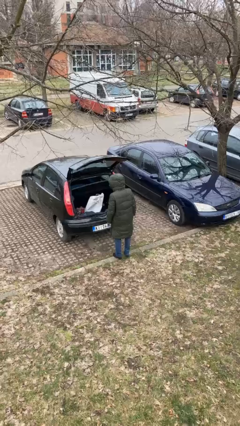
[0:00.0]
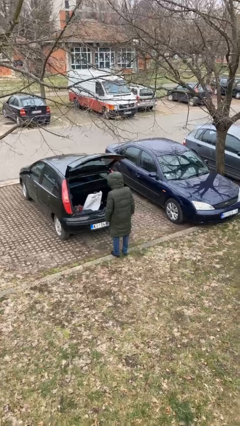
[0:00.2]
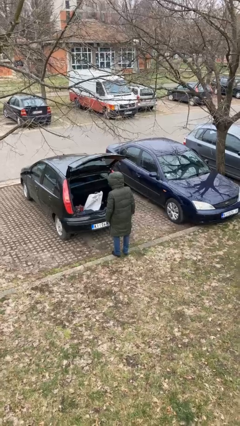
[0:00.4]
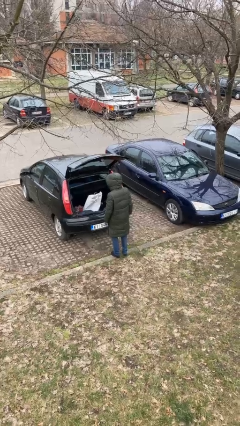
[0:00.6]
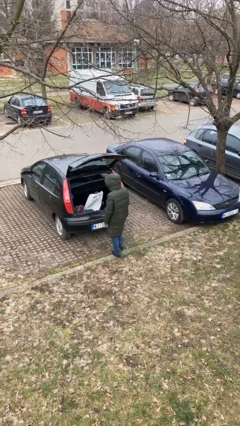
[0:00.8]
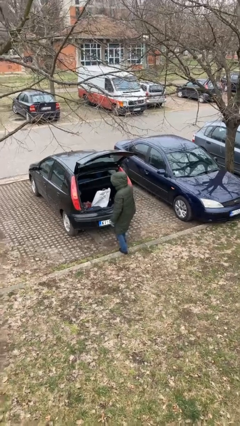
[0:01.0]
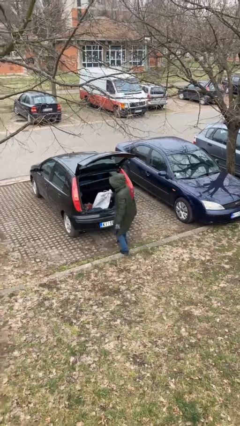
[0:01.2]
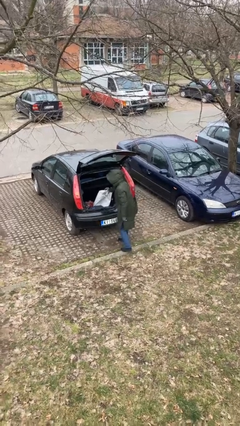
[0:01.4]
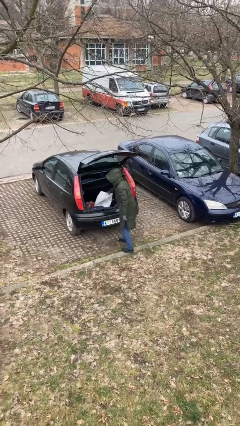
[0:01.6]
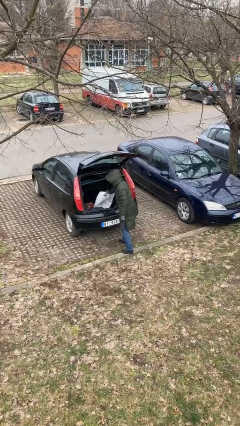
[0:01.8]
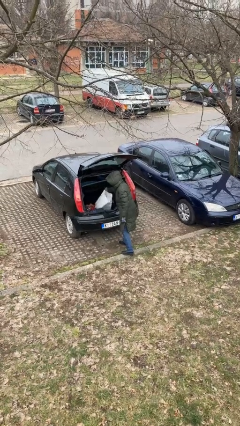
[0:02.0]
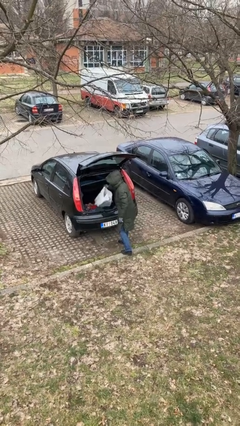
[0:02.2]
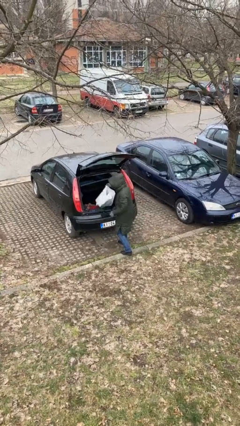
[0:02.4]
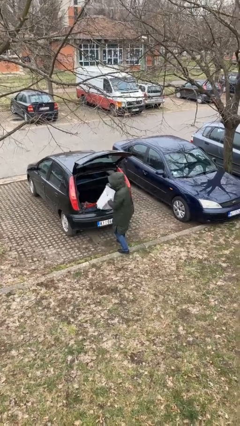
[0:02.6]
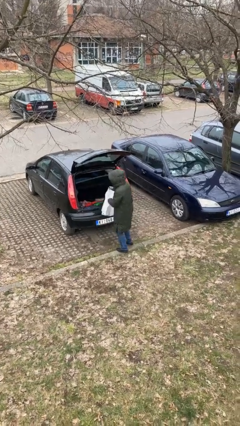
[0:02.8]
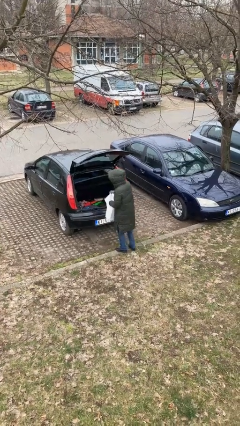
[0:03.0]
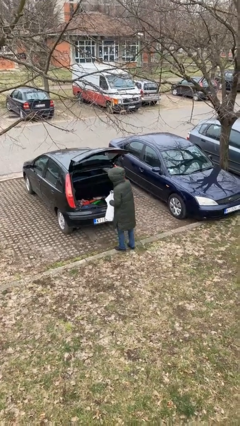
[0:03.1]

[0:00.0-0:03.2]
person unloads car

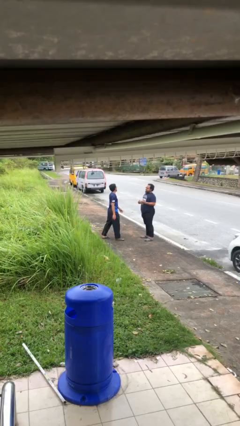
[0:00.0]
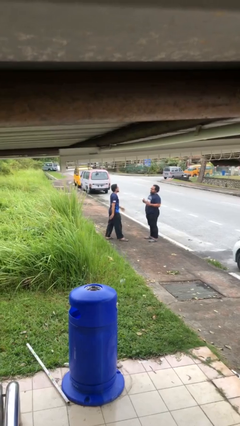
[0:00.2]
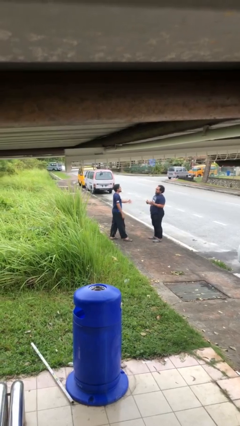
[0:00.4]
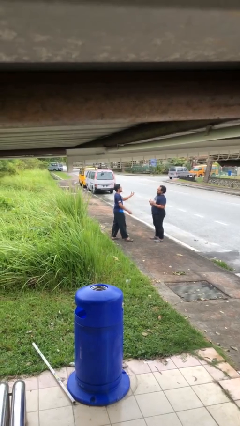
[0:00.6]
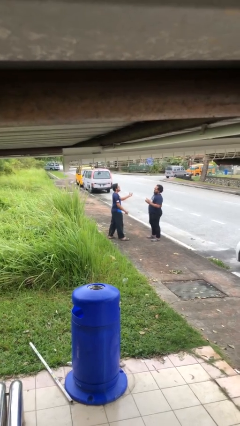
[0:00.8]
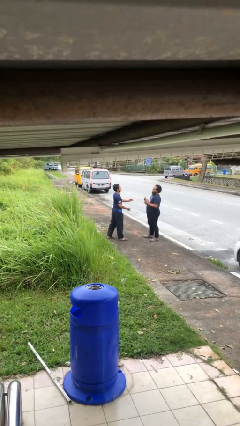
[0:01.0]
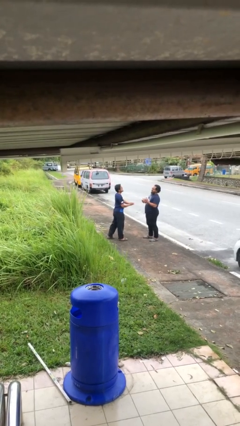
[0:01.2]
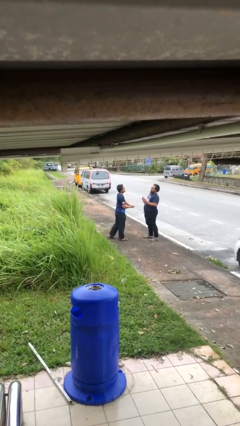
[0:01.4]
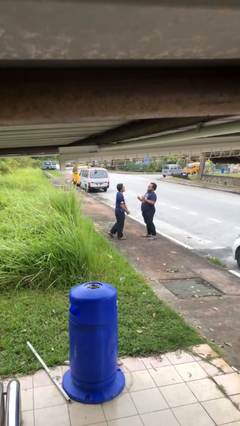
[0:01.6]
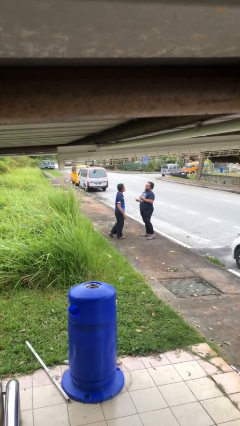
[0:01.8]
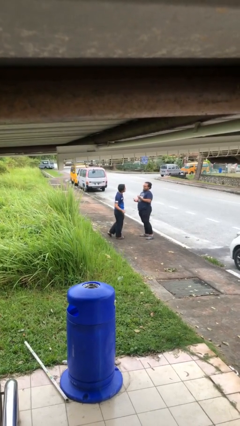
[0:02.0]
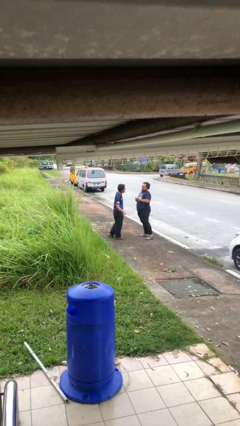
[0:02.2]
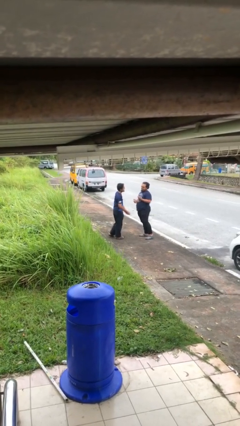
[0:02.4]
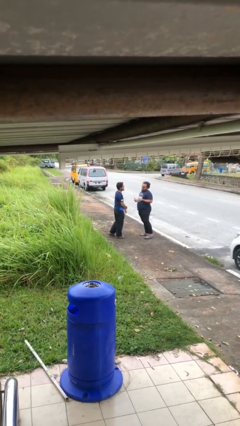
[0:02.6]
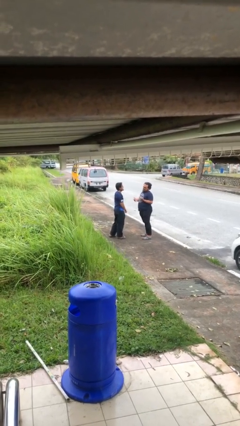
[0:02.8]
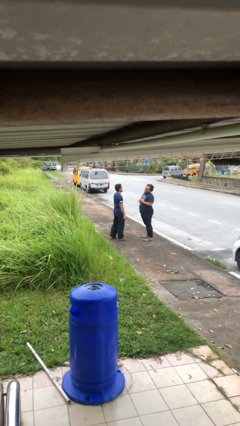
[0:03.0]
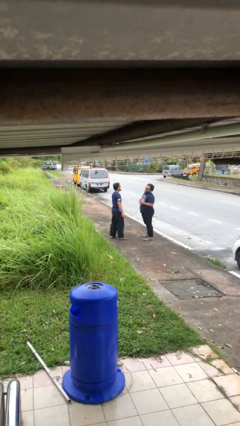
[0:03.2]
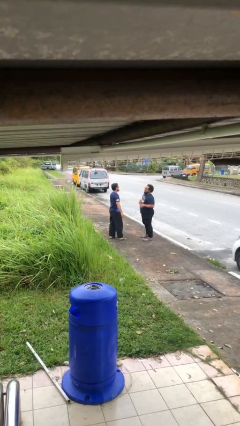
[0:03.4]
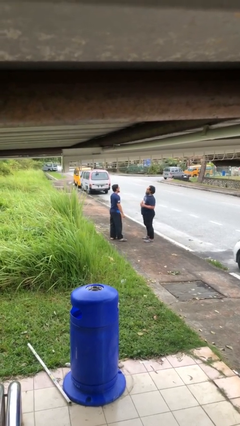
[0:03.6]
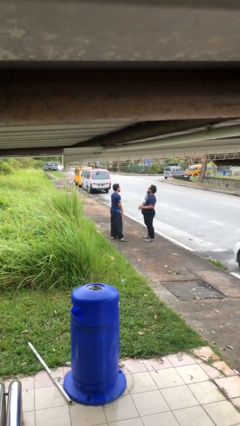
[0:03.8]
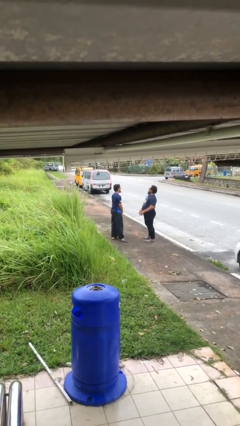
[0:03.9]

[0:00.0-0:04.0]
person talks to person

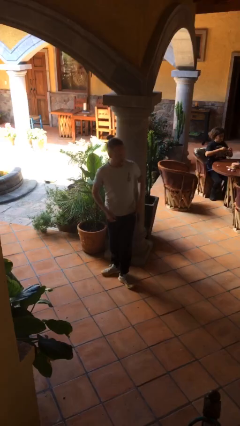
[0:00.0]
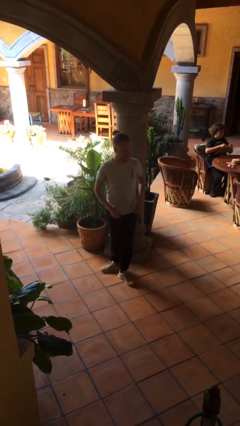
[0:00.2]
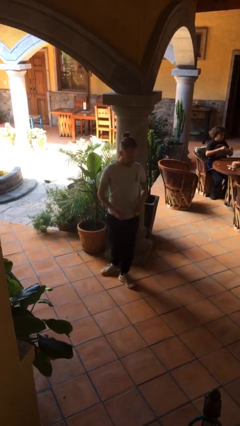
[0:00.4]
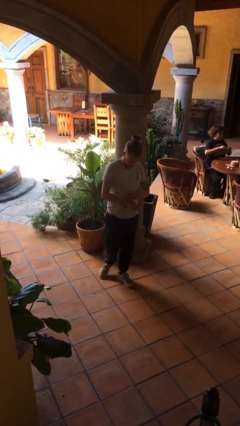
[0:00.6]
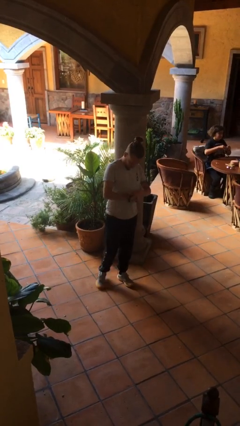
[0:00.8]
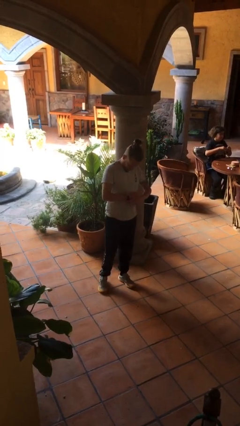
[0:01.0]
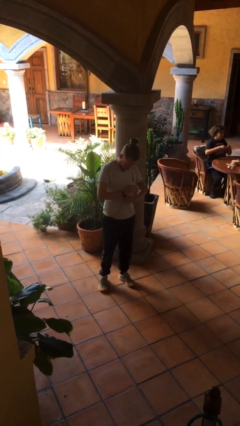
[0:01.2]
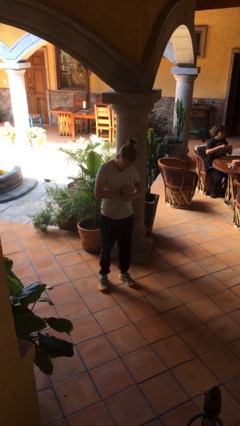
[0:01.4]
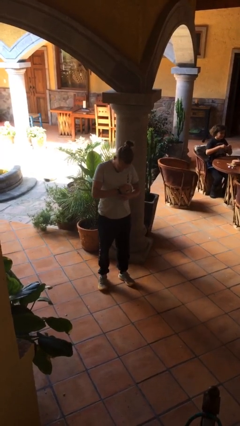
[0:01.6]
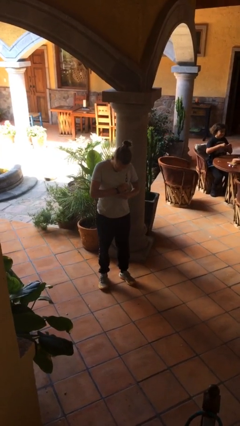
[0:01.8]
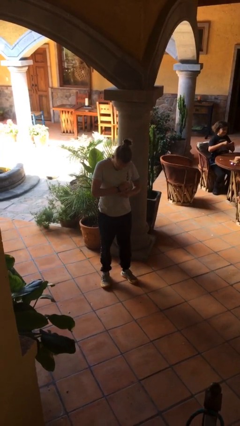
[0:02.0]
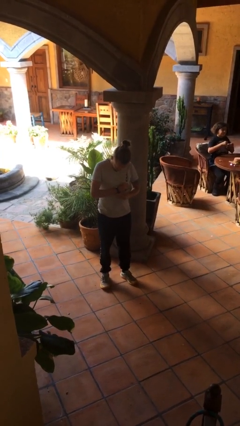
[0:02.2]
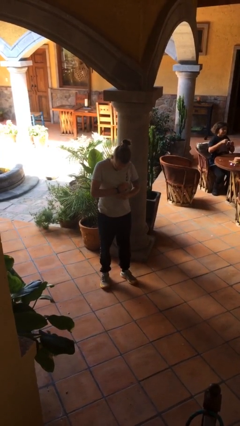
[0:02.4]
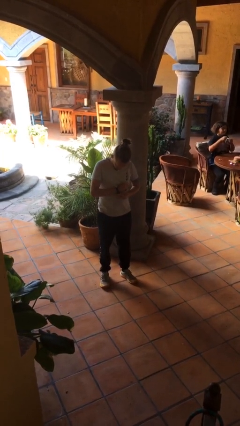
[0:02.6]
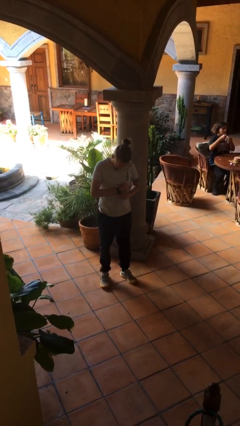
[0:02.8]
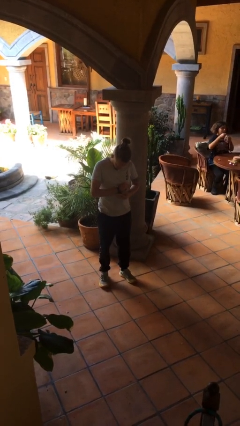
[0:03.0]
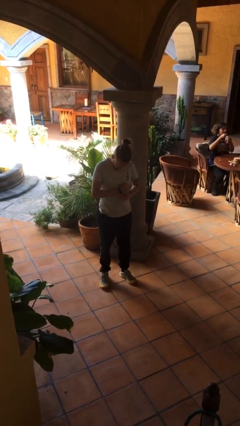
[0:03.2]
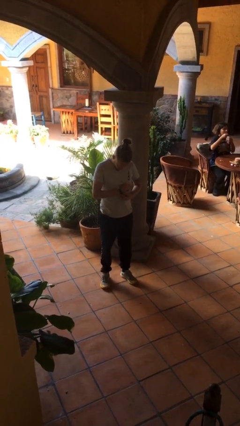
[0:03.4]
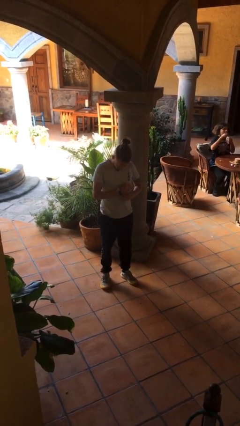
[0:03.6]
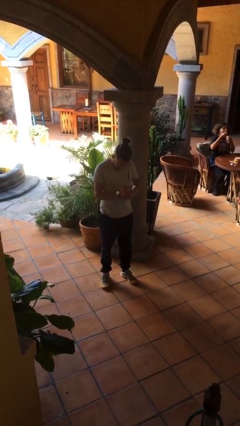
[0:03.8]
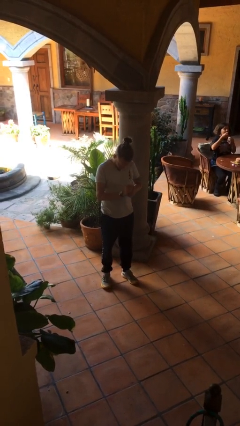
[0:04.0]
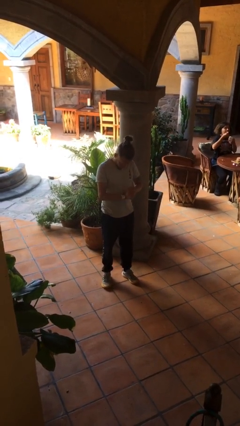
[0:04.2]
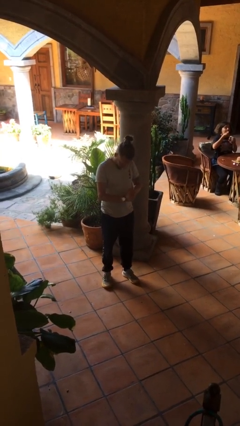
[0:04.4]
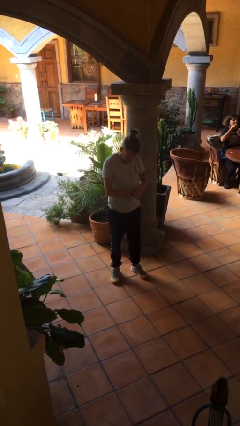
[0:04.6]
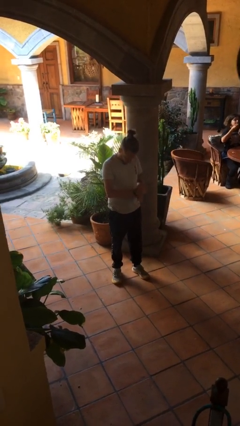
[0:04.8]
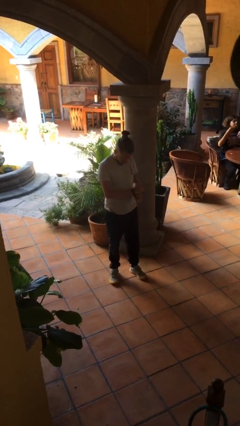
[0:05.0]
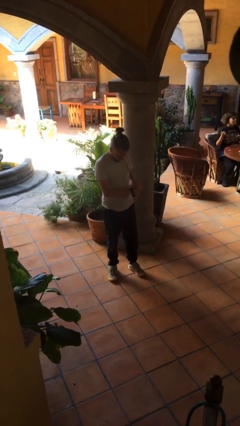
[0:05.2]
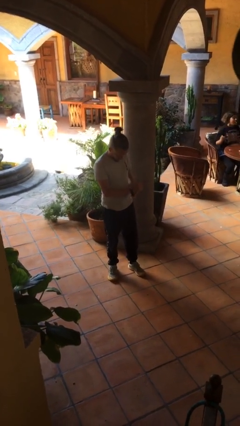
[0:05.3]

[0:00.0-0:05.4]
person puts on wristwatch

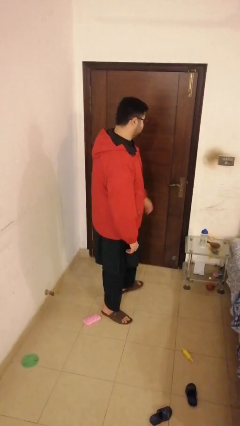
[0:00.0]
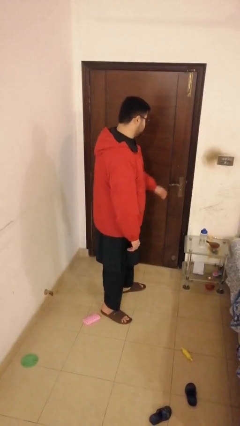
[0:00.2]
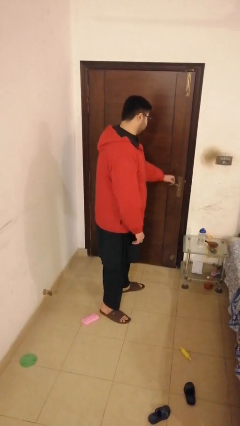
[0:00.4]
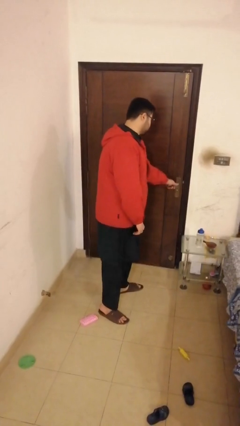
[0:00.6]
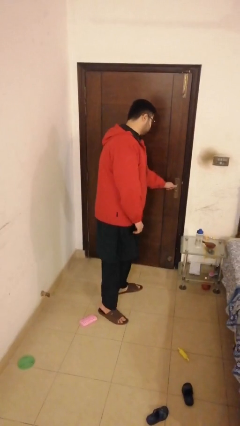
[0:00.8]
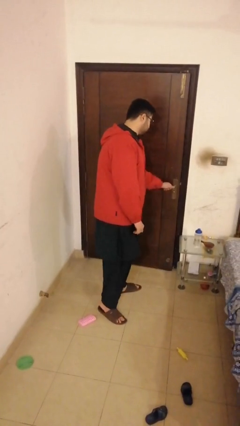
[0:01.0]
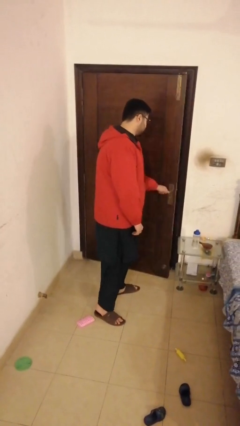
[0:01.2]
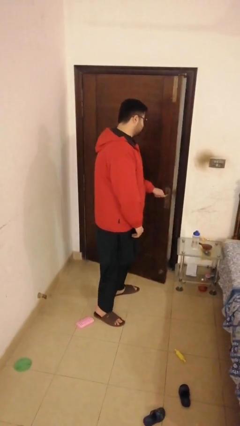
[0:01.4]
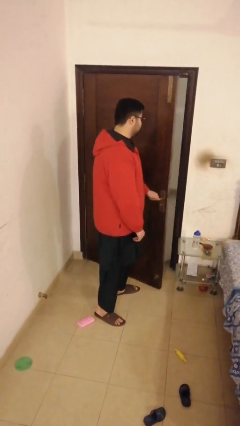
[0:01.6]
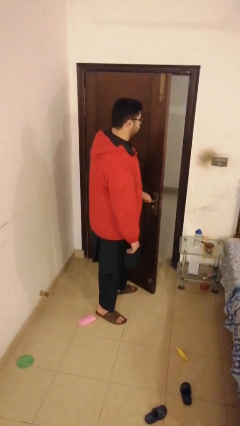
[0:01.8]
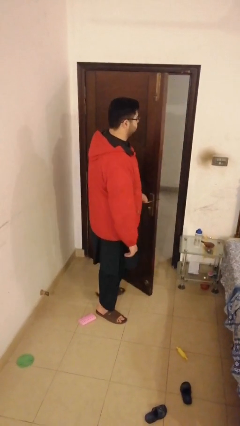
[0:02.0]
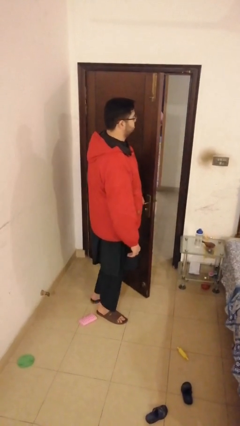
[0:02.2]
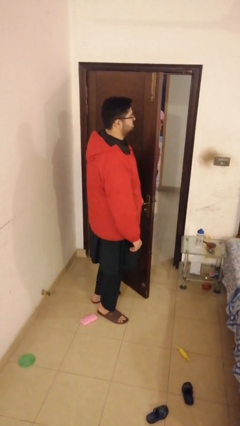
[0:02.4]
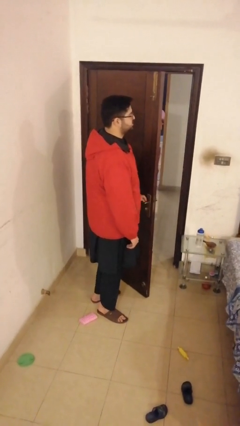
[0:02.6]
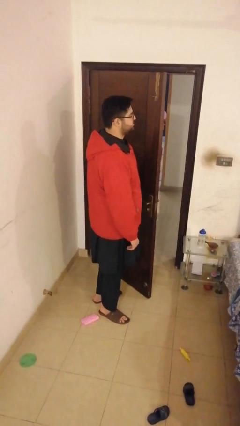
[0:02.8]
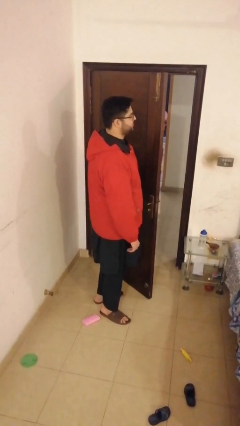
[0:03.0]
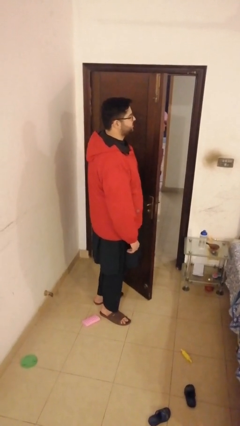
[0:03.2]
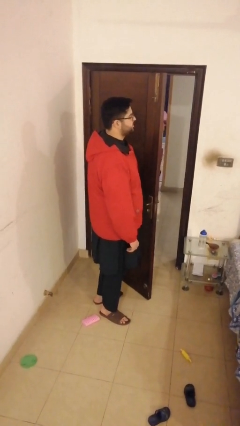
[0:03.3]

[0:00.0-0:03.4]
person opens facility door

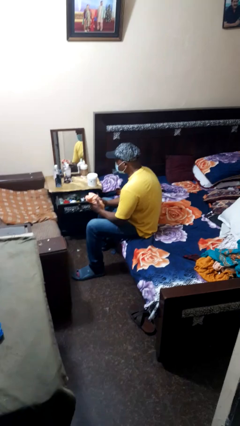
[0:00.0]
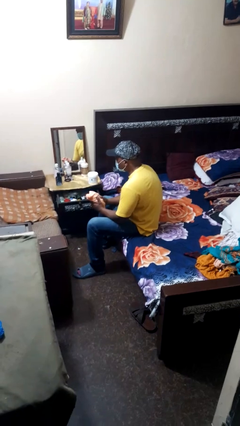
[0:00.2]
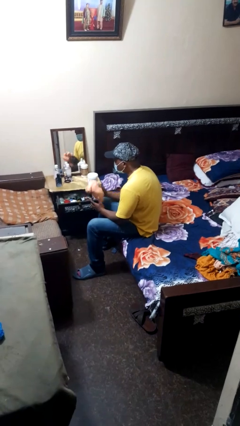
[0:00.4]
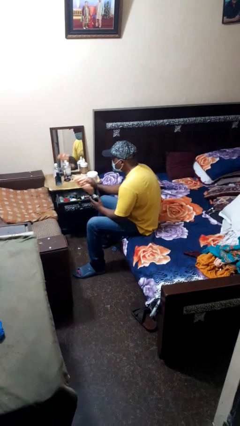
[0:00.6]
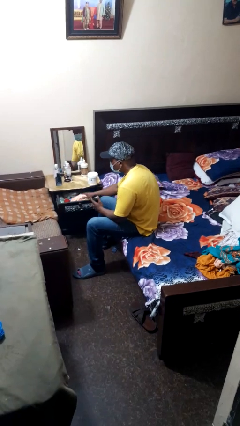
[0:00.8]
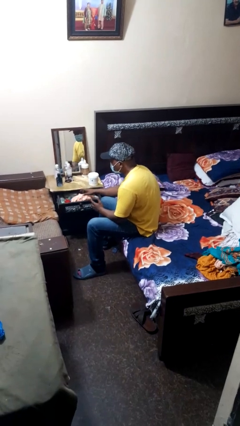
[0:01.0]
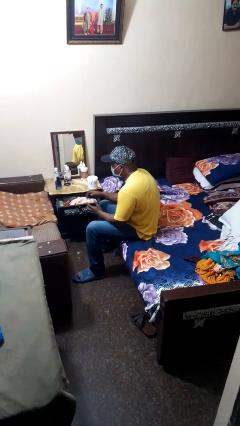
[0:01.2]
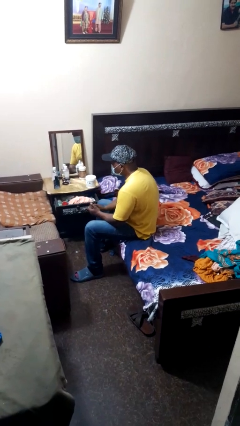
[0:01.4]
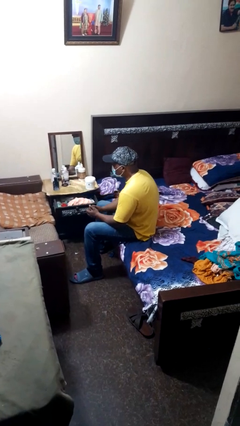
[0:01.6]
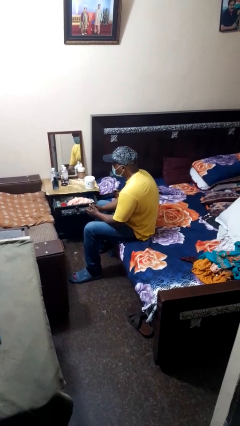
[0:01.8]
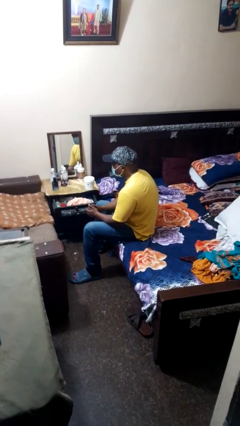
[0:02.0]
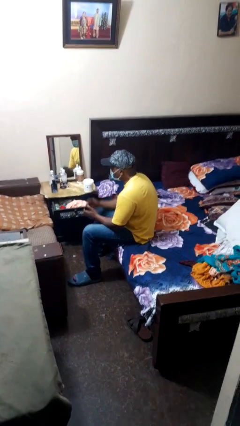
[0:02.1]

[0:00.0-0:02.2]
person puts clothes into dresser
